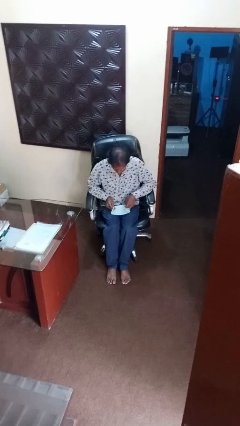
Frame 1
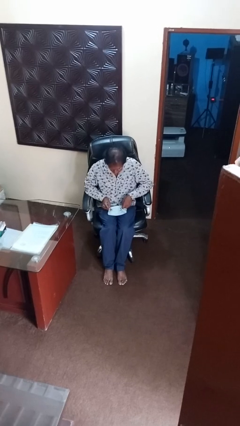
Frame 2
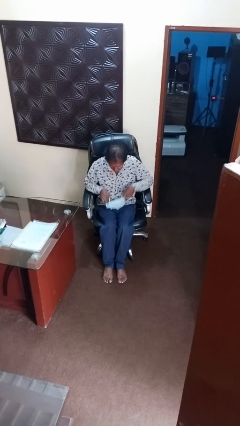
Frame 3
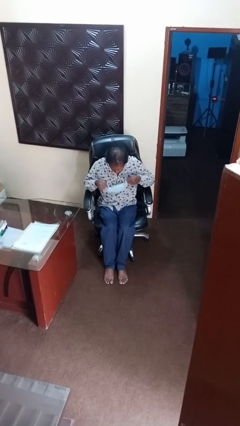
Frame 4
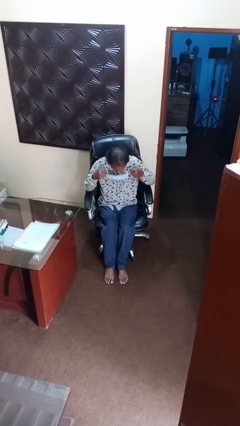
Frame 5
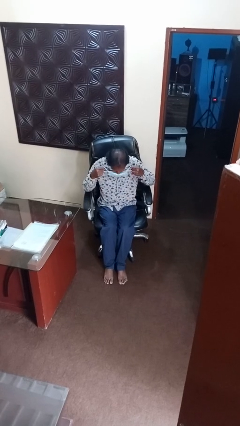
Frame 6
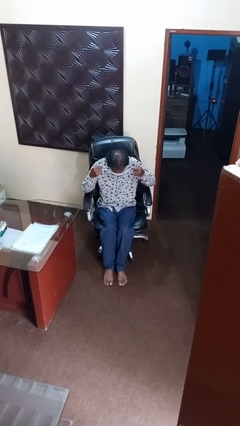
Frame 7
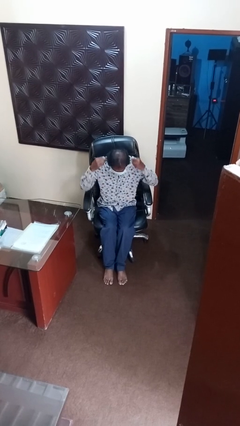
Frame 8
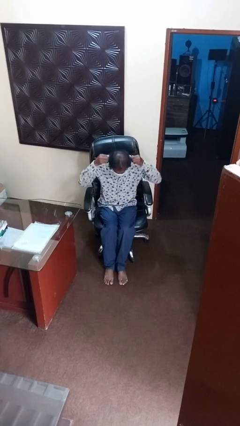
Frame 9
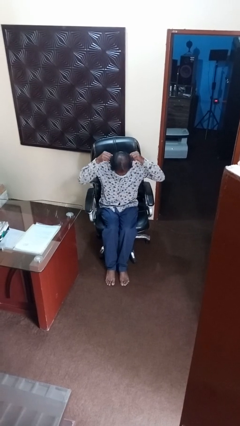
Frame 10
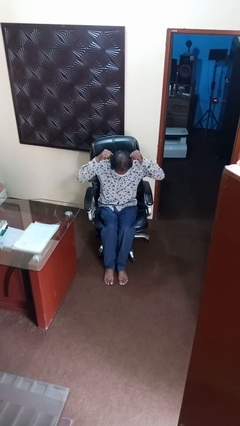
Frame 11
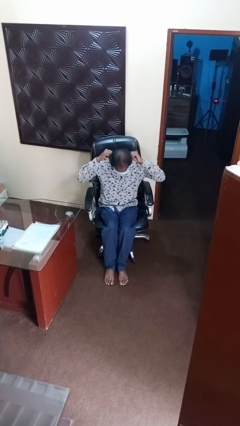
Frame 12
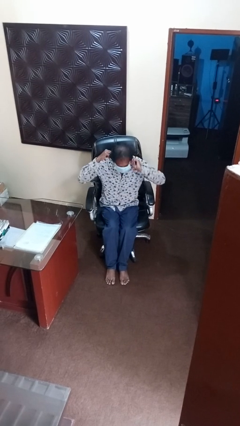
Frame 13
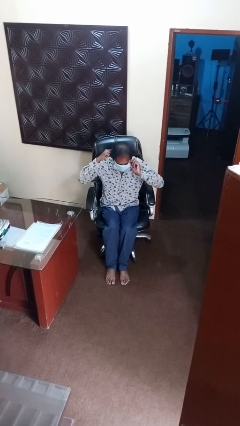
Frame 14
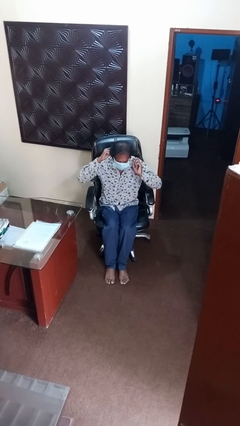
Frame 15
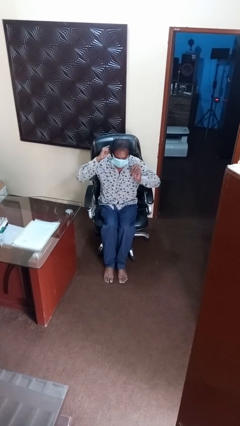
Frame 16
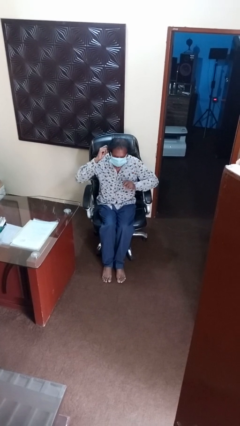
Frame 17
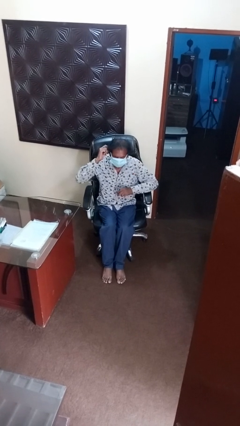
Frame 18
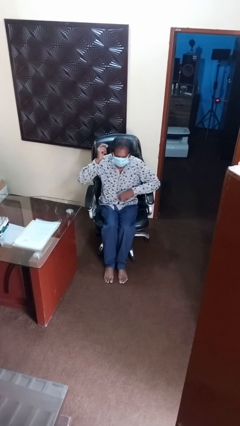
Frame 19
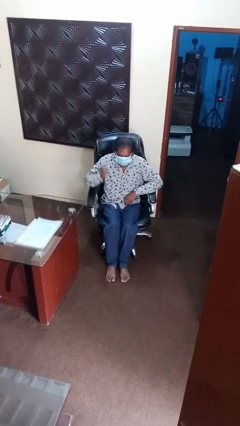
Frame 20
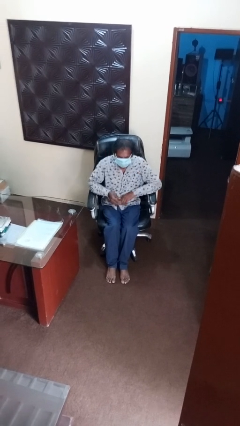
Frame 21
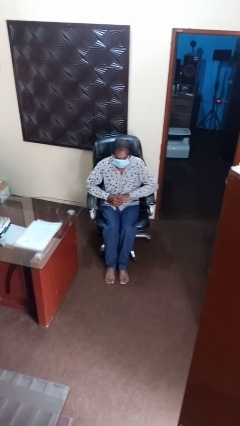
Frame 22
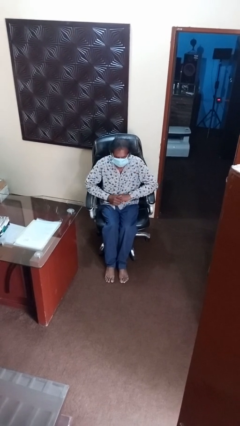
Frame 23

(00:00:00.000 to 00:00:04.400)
person puts on facemask

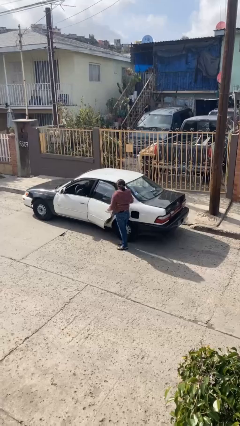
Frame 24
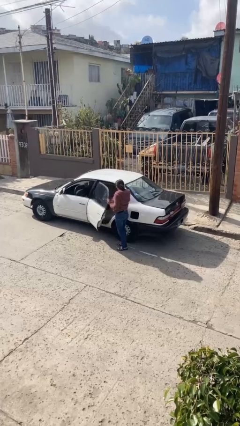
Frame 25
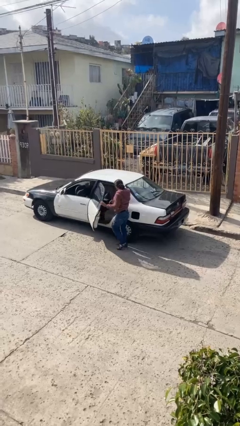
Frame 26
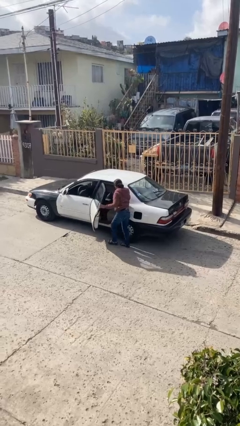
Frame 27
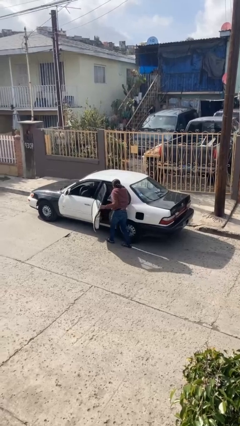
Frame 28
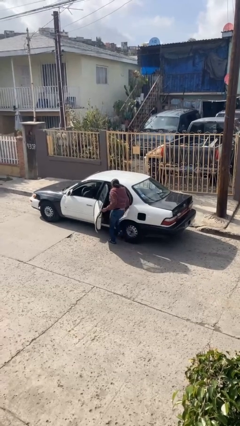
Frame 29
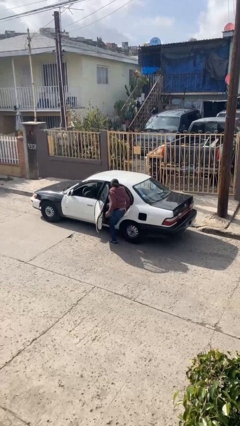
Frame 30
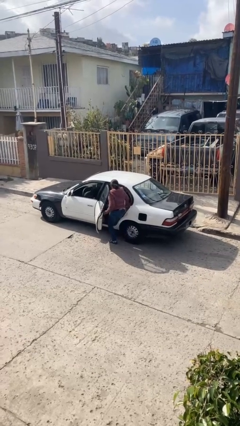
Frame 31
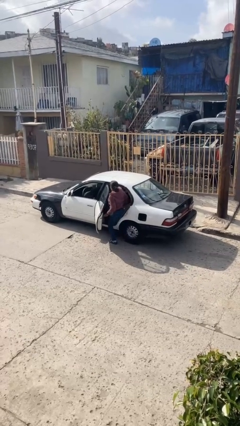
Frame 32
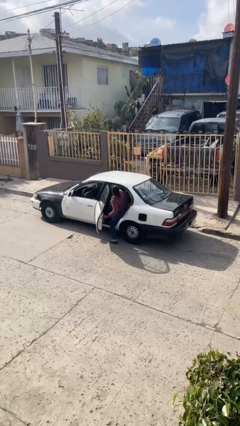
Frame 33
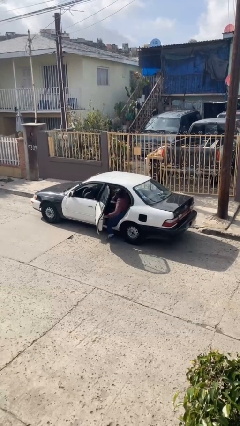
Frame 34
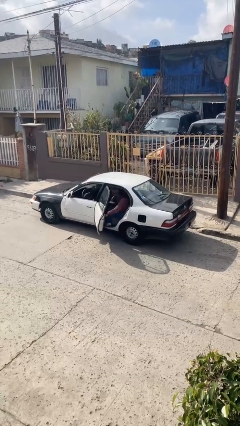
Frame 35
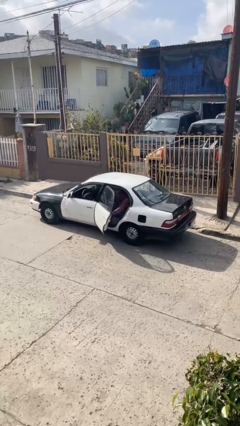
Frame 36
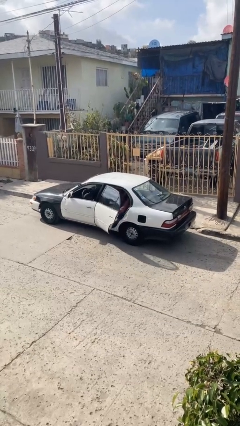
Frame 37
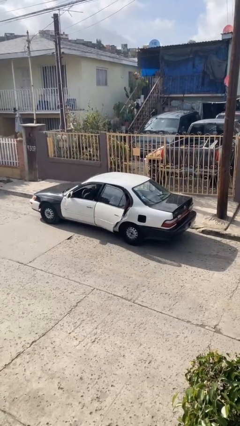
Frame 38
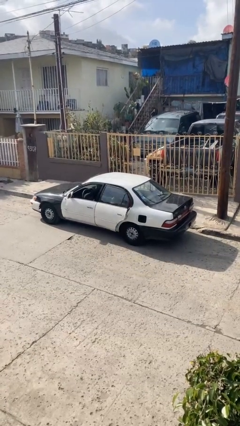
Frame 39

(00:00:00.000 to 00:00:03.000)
person enters car

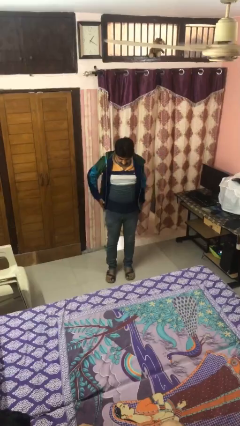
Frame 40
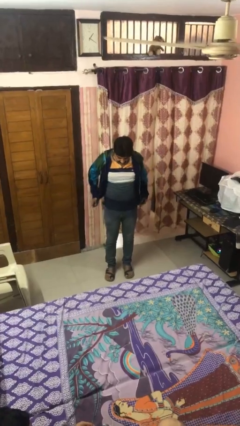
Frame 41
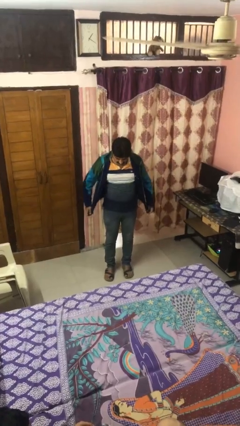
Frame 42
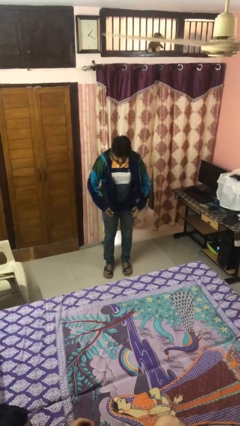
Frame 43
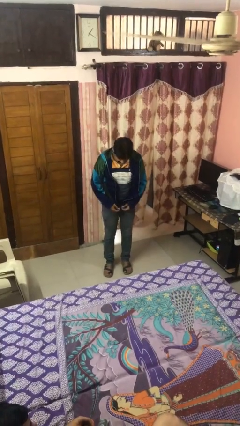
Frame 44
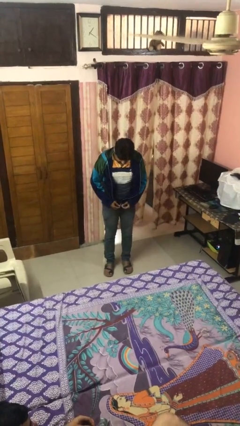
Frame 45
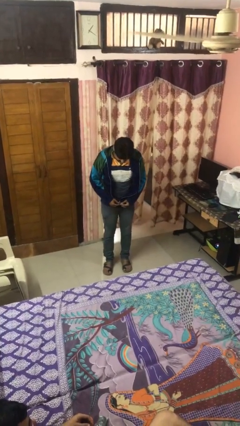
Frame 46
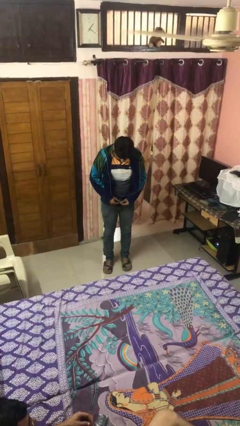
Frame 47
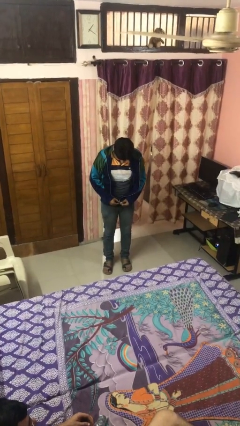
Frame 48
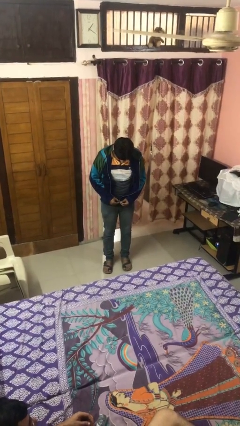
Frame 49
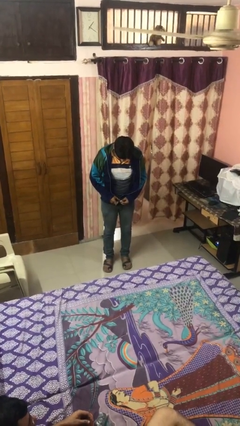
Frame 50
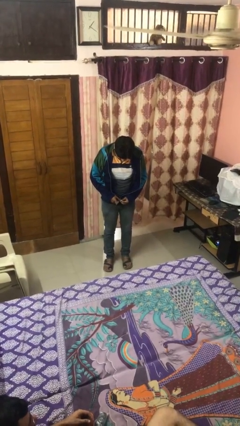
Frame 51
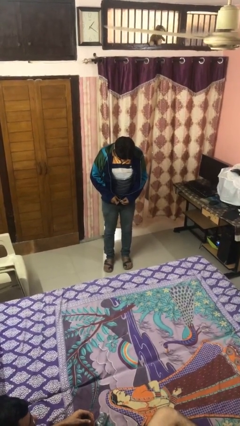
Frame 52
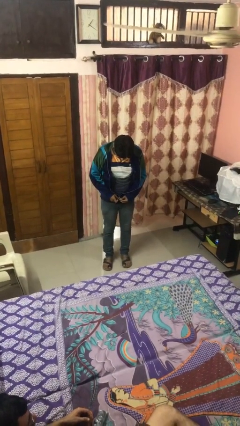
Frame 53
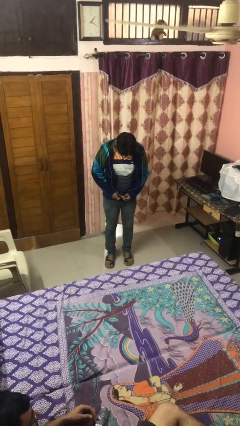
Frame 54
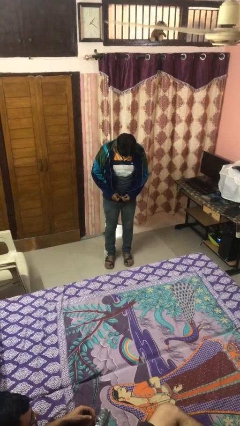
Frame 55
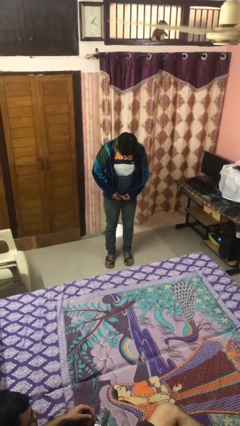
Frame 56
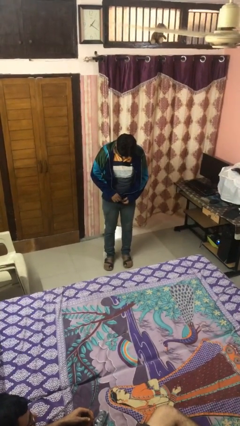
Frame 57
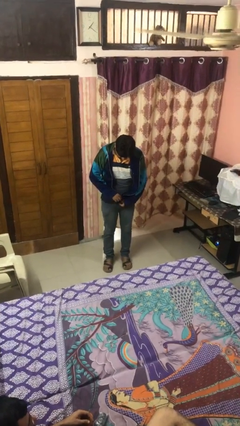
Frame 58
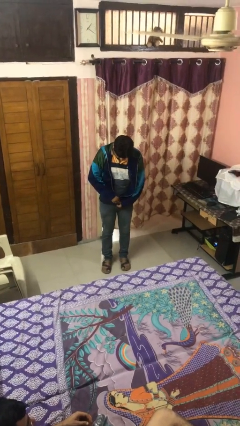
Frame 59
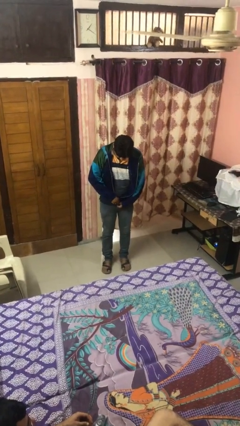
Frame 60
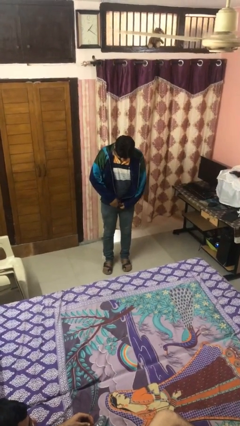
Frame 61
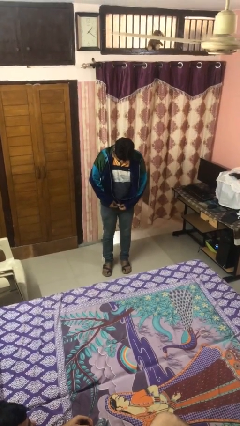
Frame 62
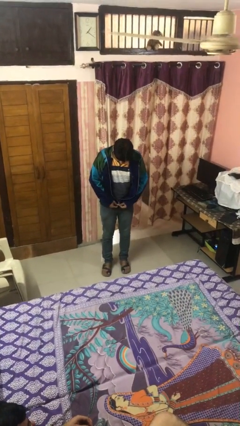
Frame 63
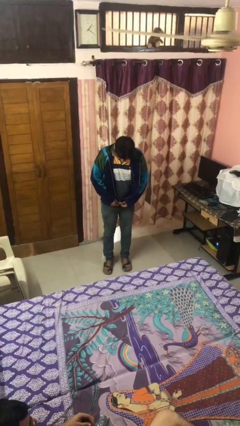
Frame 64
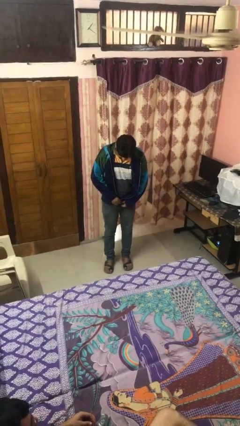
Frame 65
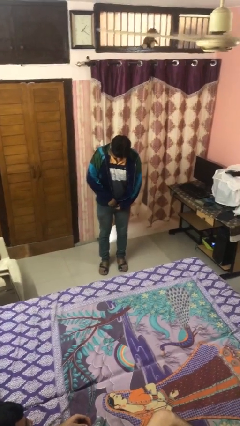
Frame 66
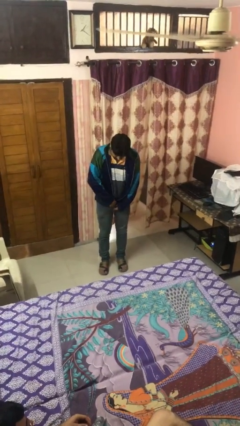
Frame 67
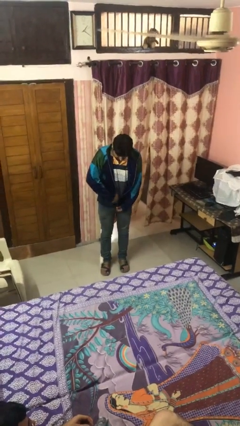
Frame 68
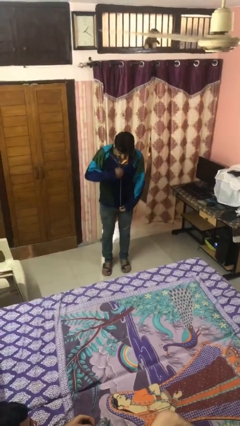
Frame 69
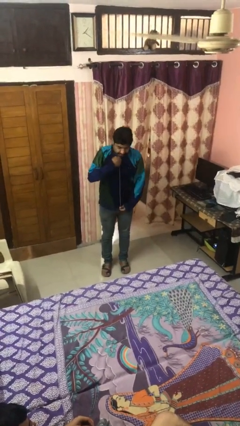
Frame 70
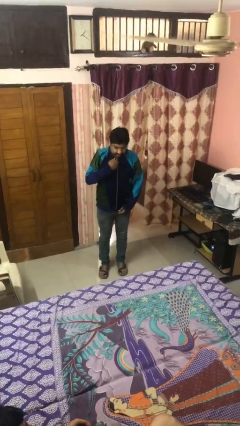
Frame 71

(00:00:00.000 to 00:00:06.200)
person zips up jacket

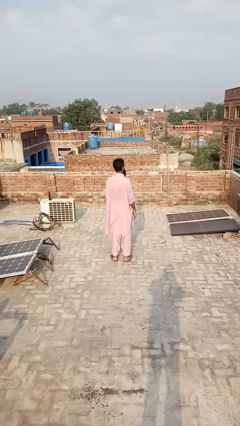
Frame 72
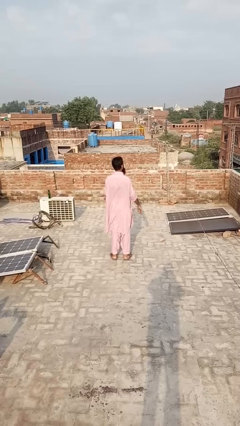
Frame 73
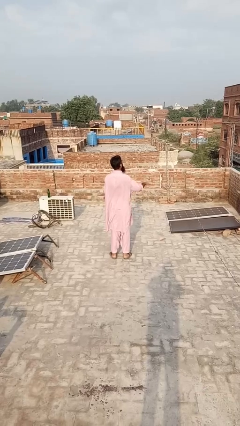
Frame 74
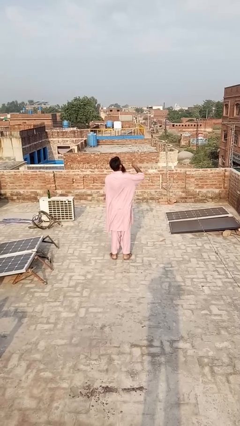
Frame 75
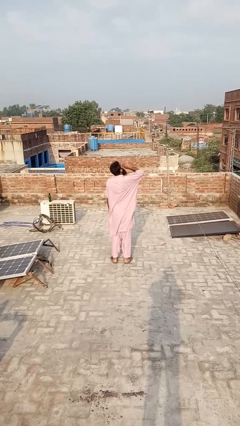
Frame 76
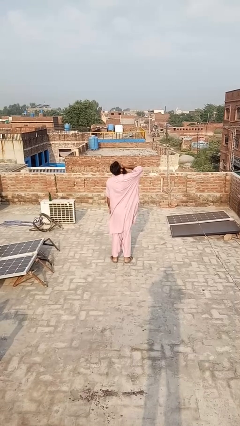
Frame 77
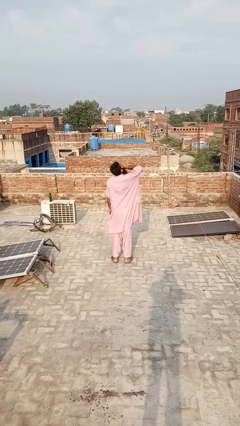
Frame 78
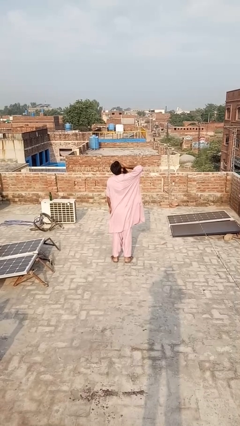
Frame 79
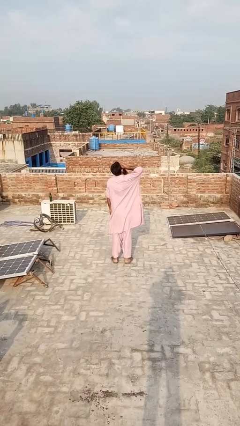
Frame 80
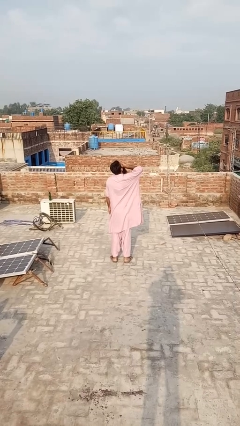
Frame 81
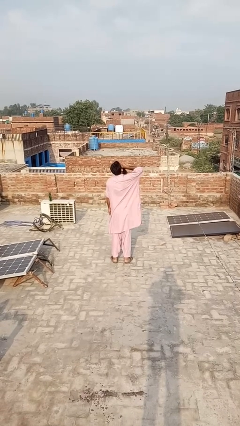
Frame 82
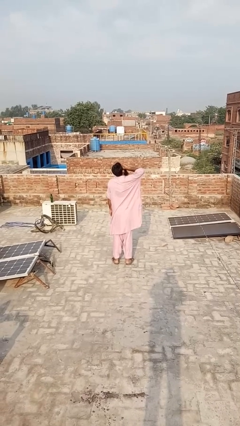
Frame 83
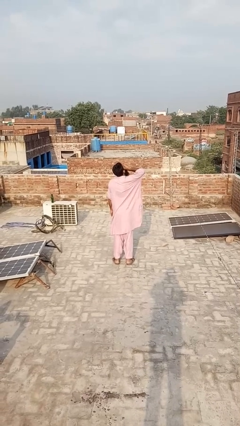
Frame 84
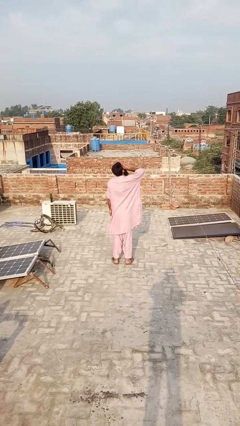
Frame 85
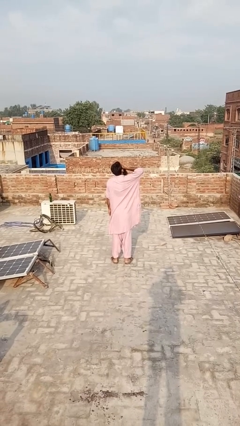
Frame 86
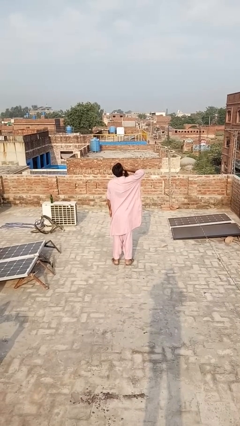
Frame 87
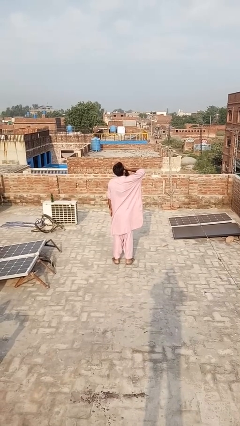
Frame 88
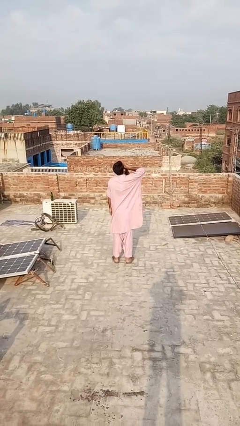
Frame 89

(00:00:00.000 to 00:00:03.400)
person yawns

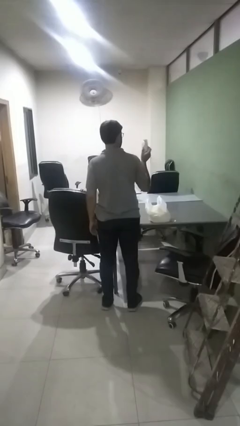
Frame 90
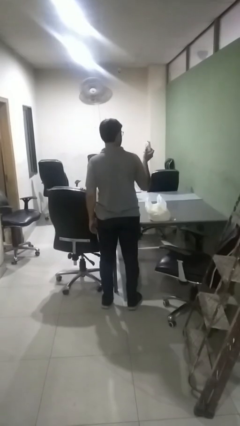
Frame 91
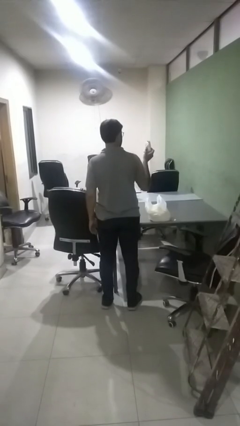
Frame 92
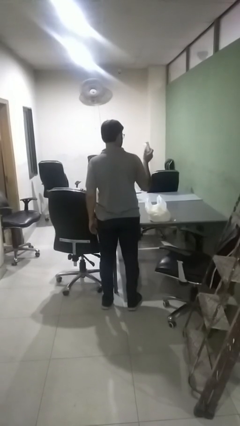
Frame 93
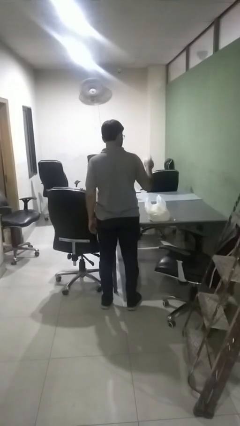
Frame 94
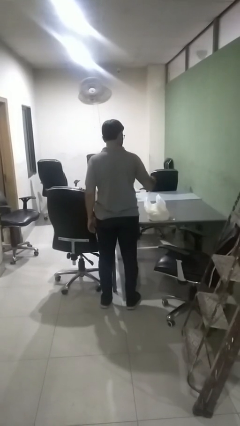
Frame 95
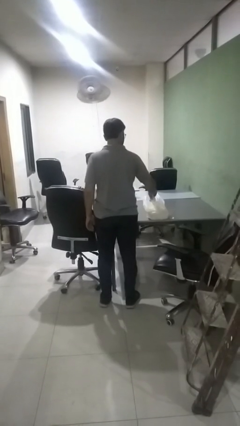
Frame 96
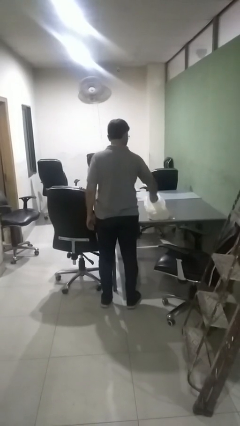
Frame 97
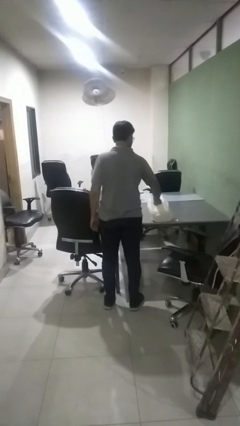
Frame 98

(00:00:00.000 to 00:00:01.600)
person puts object into bag
